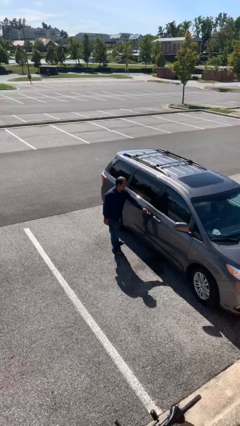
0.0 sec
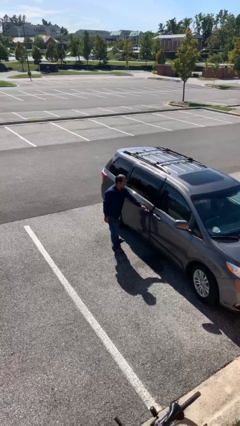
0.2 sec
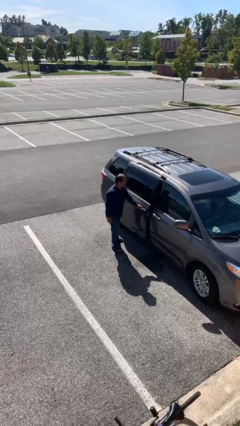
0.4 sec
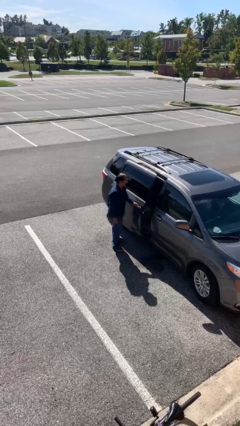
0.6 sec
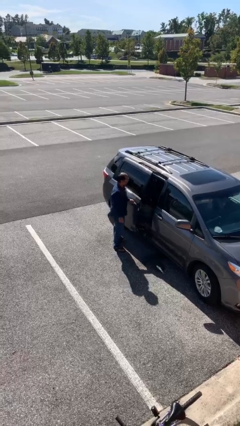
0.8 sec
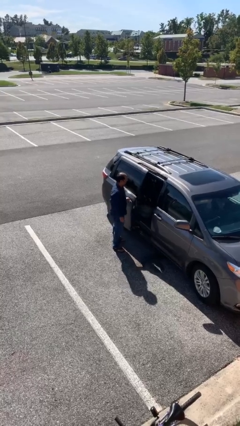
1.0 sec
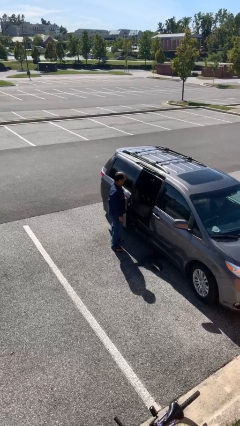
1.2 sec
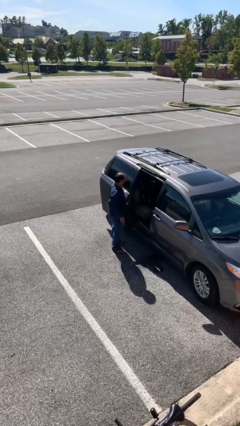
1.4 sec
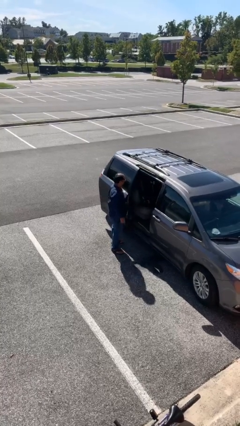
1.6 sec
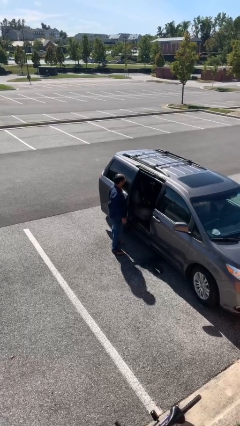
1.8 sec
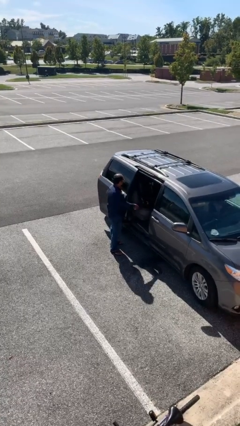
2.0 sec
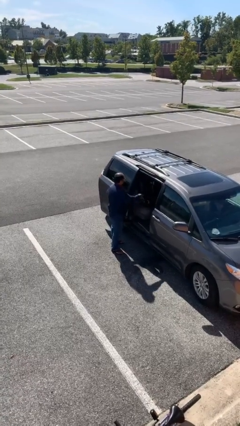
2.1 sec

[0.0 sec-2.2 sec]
person opens car door

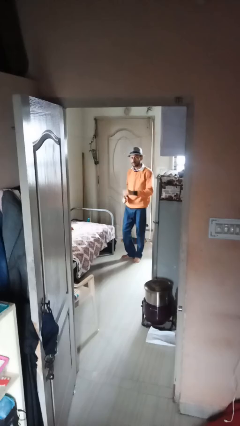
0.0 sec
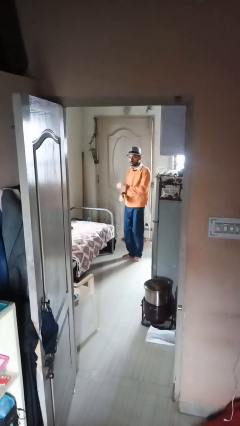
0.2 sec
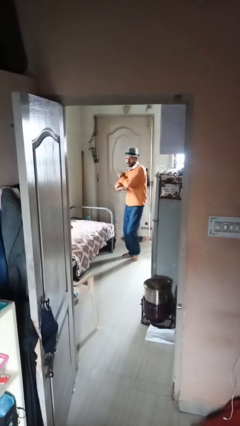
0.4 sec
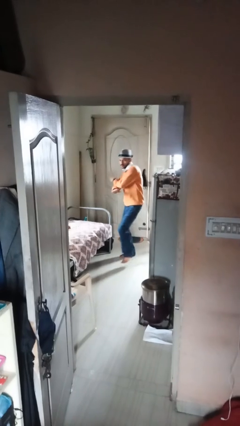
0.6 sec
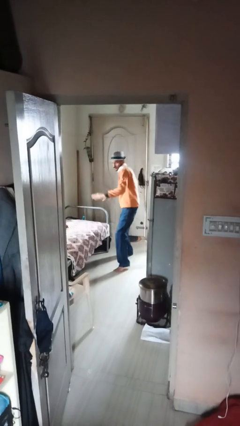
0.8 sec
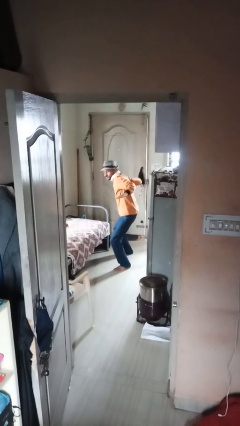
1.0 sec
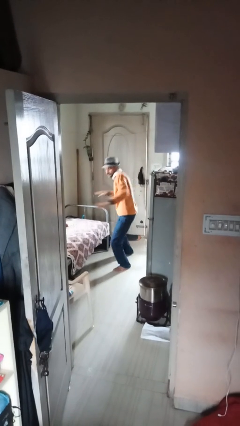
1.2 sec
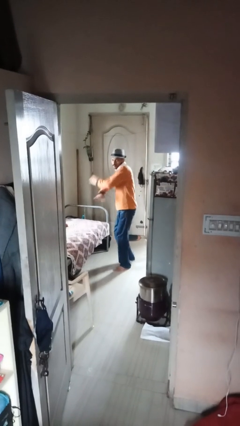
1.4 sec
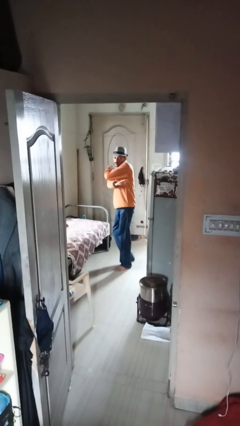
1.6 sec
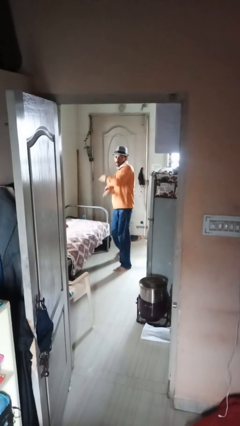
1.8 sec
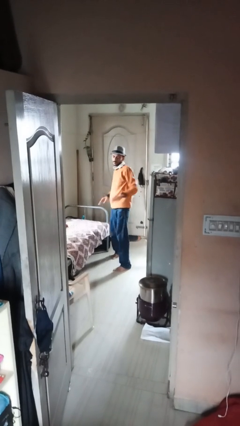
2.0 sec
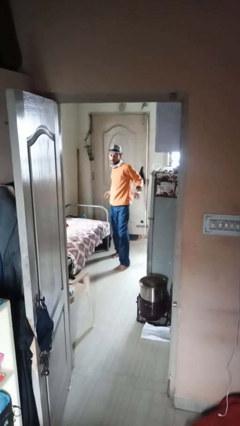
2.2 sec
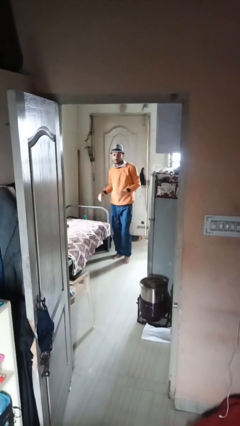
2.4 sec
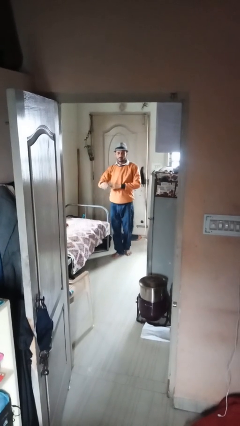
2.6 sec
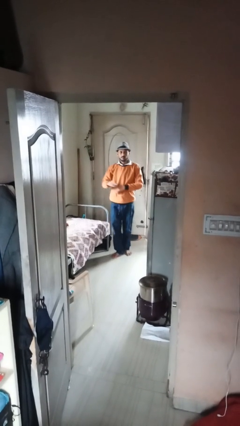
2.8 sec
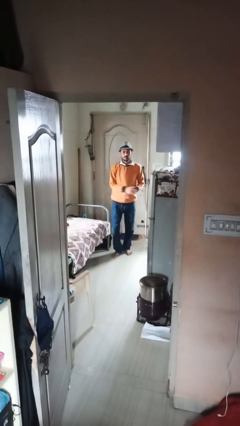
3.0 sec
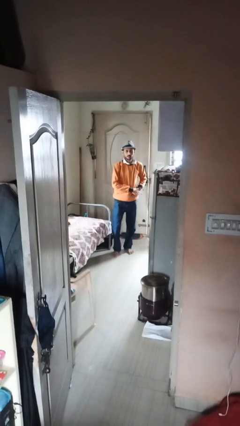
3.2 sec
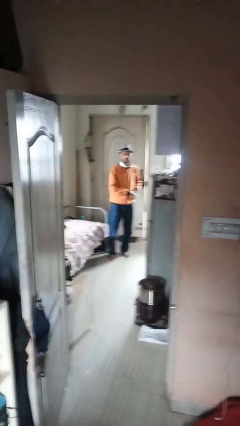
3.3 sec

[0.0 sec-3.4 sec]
person karate chop

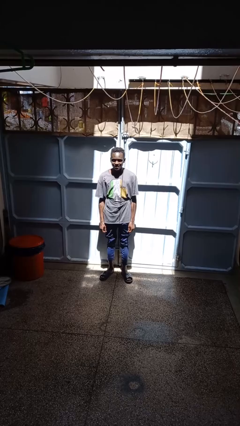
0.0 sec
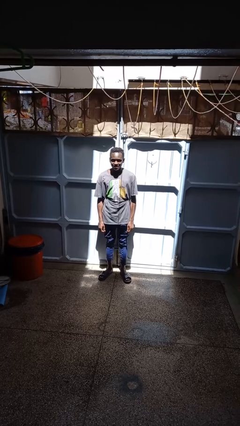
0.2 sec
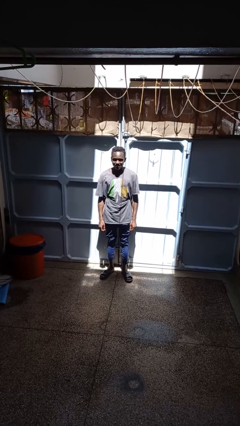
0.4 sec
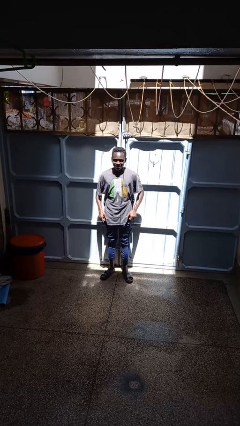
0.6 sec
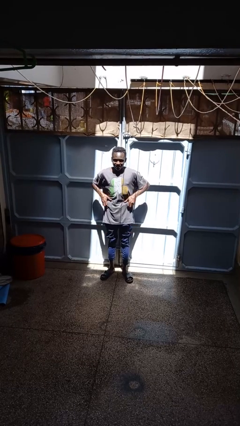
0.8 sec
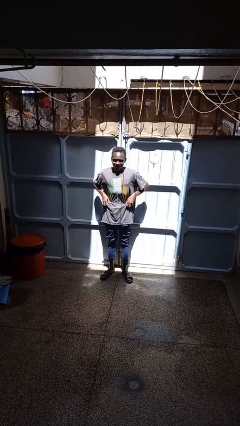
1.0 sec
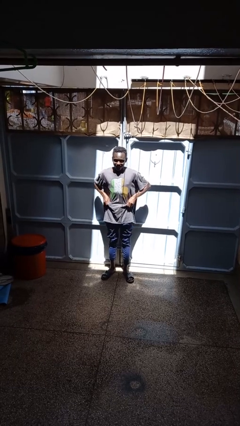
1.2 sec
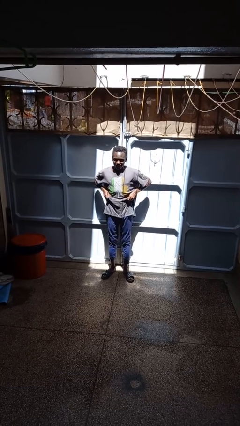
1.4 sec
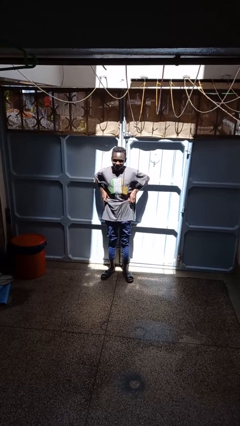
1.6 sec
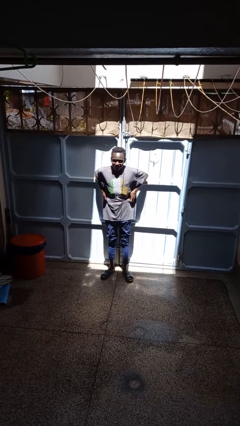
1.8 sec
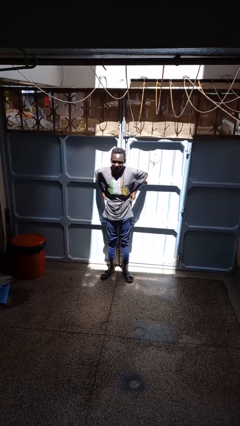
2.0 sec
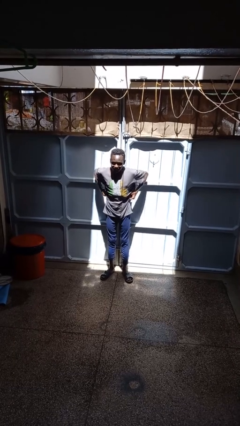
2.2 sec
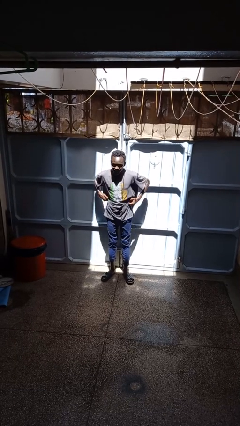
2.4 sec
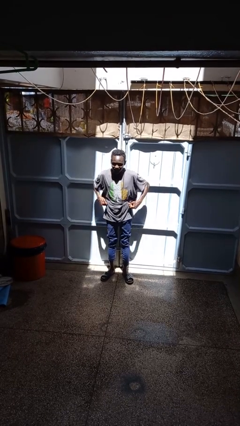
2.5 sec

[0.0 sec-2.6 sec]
person hikes up pants

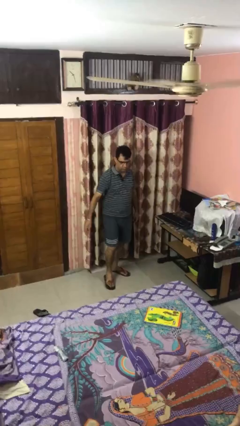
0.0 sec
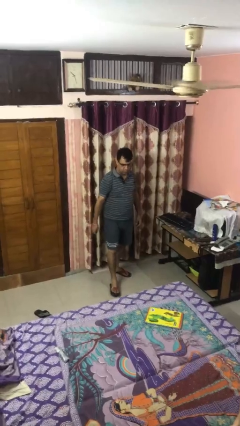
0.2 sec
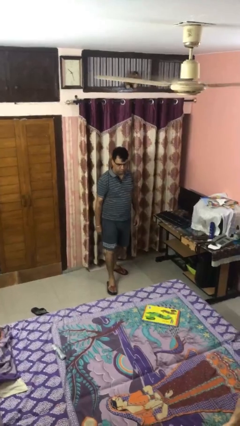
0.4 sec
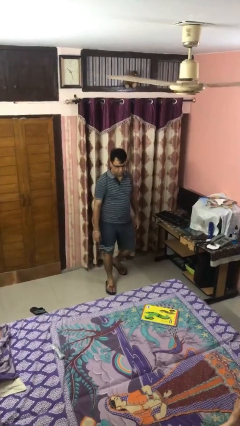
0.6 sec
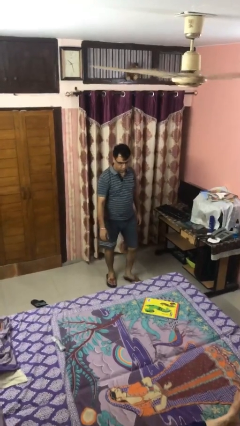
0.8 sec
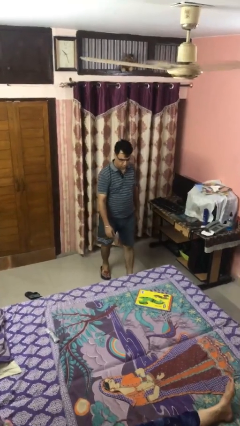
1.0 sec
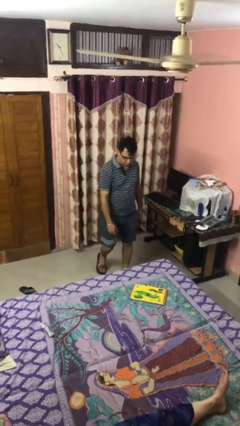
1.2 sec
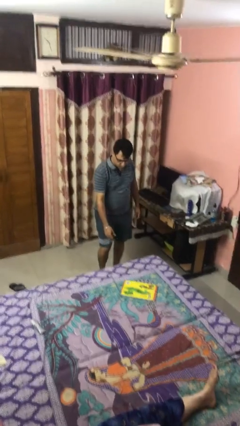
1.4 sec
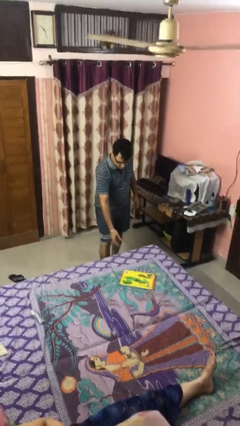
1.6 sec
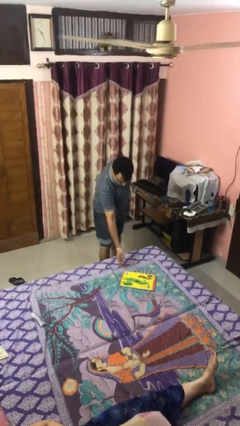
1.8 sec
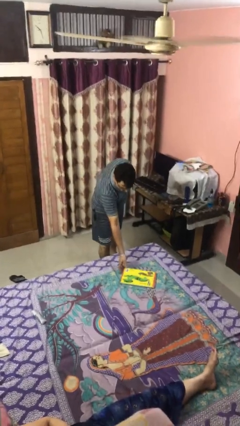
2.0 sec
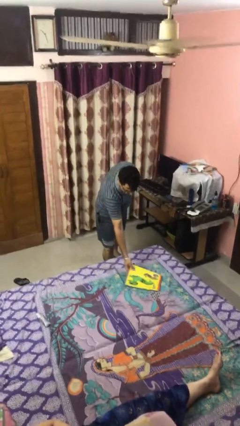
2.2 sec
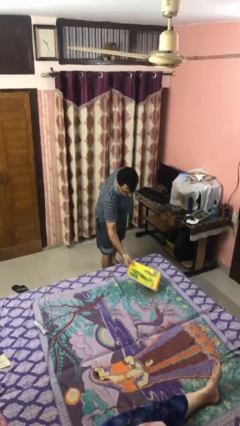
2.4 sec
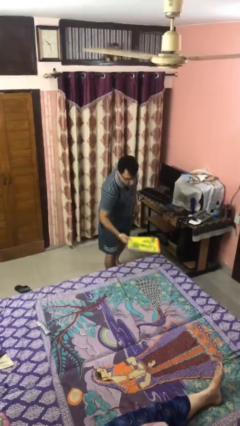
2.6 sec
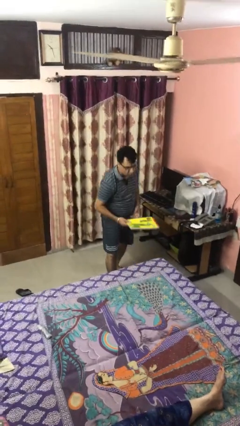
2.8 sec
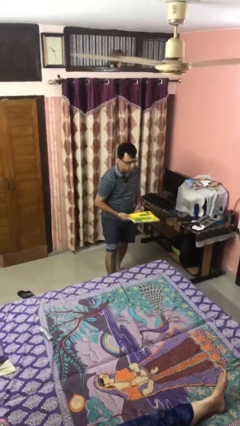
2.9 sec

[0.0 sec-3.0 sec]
person picks up object from bed

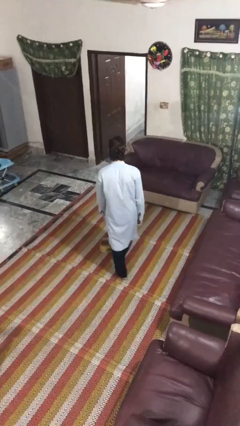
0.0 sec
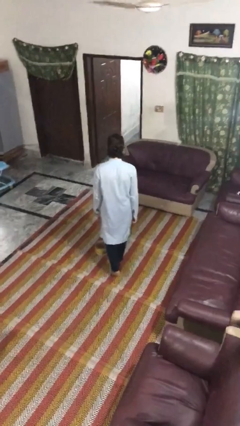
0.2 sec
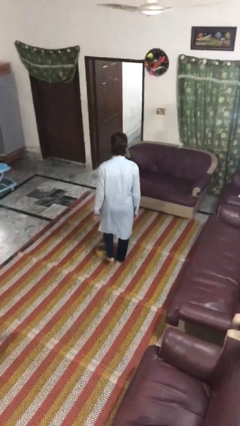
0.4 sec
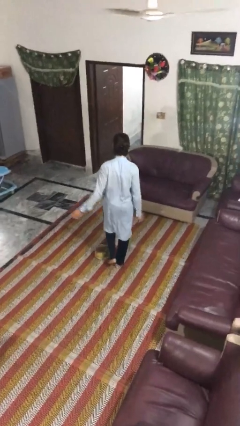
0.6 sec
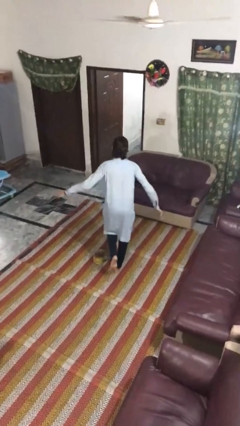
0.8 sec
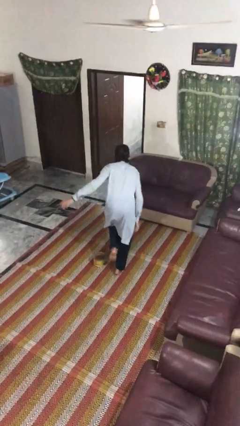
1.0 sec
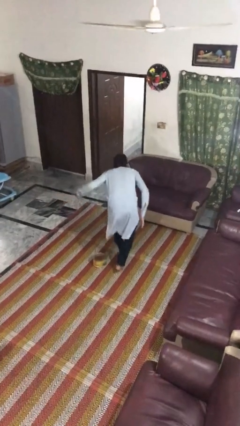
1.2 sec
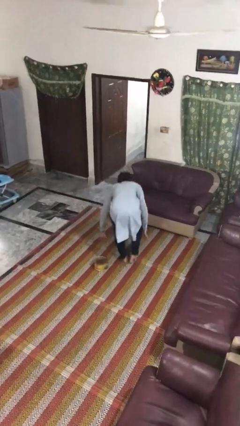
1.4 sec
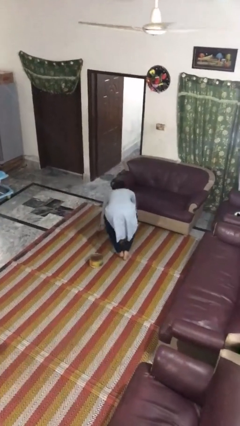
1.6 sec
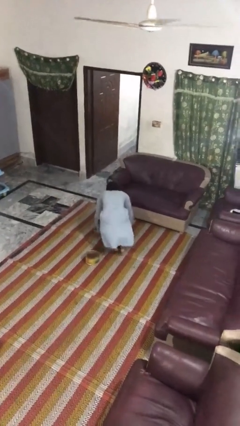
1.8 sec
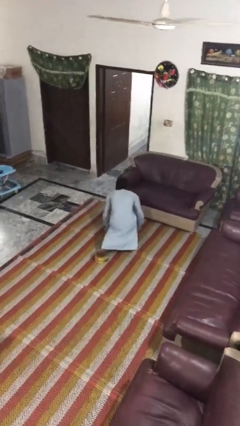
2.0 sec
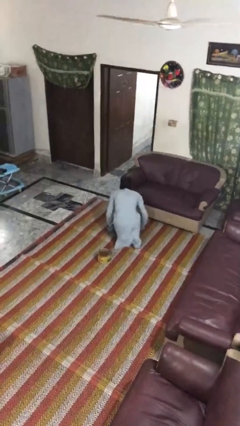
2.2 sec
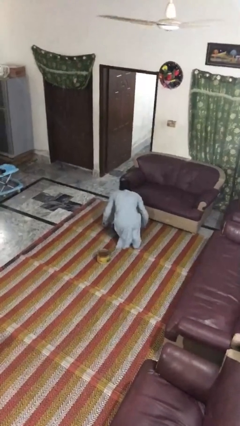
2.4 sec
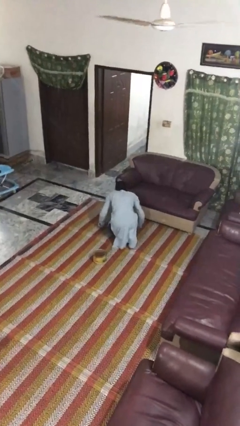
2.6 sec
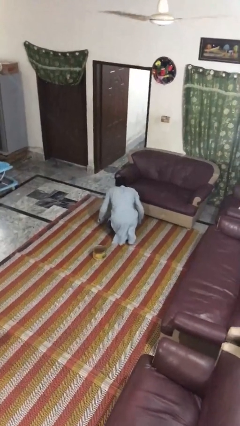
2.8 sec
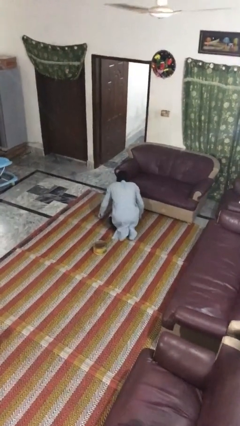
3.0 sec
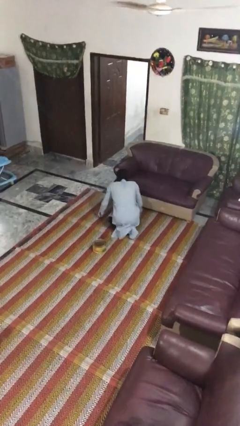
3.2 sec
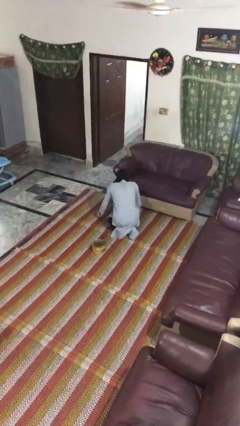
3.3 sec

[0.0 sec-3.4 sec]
person trips on object on floor

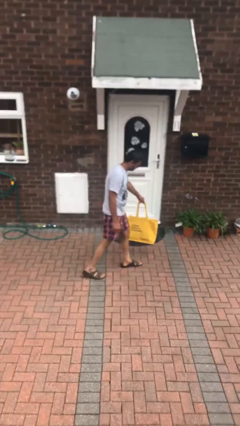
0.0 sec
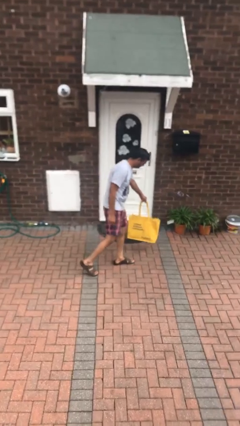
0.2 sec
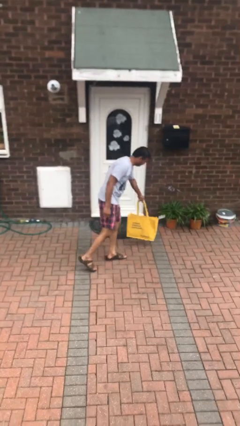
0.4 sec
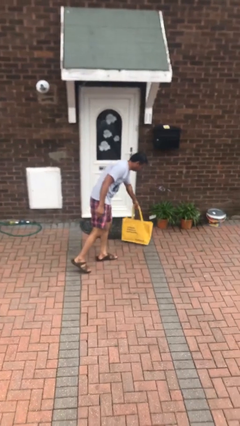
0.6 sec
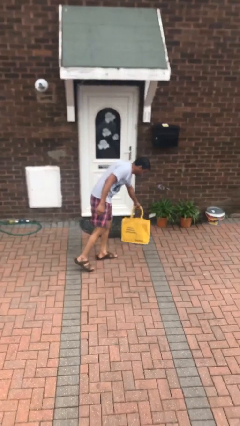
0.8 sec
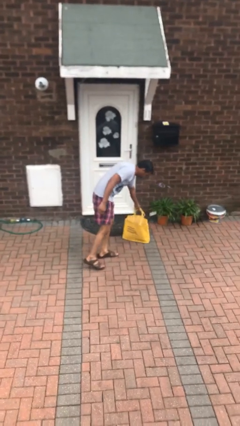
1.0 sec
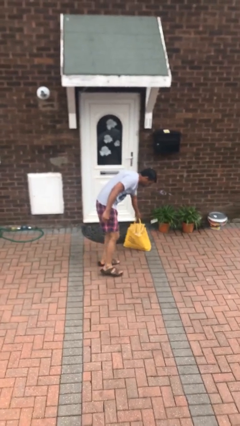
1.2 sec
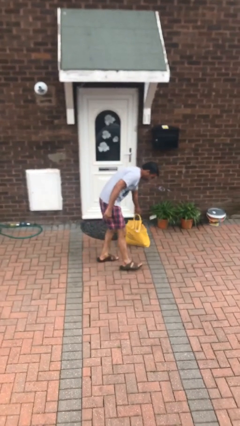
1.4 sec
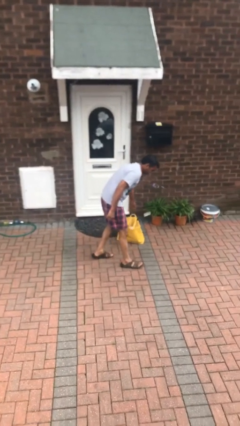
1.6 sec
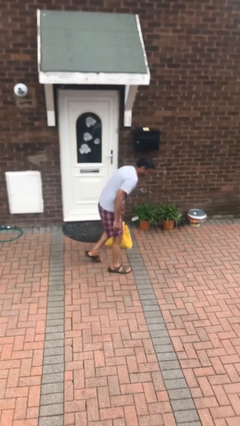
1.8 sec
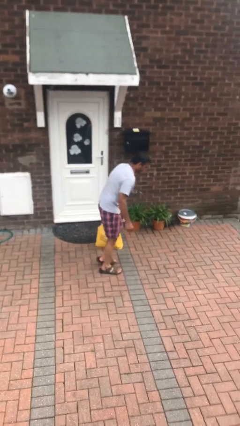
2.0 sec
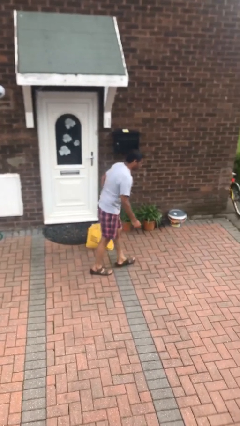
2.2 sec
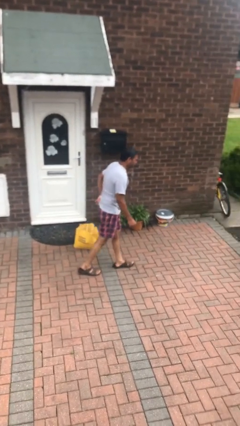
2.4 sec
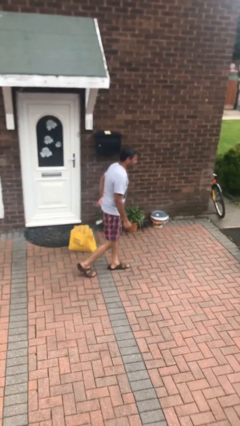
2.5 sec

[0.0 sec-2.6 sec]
person puts down object on floor
